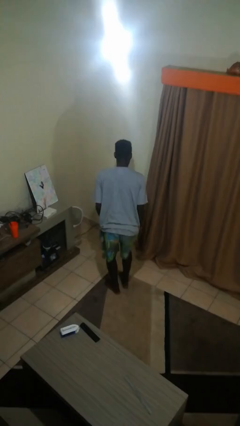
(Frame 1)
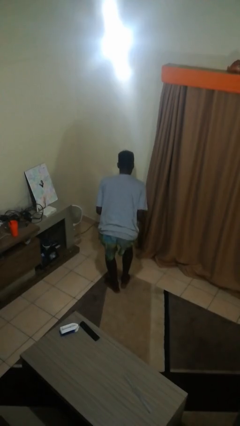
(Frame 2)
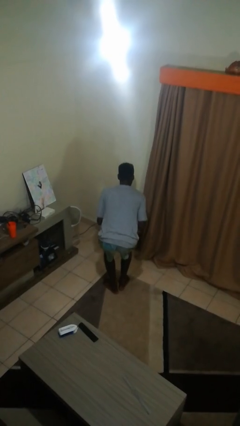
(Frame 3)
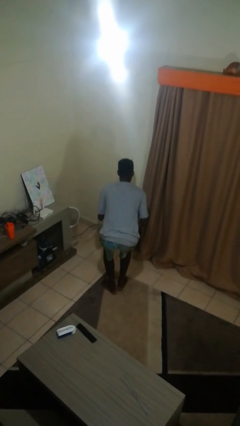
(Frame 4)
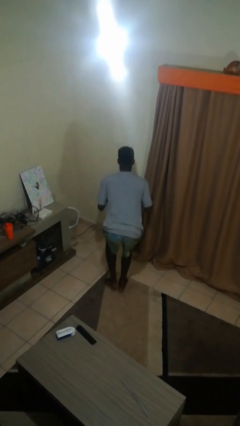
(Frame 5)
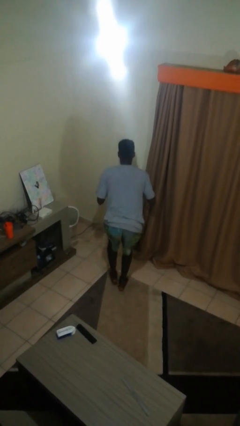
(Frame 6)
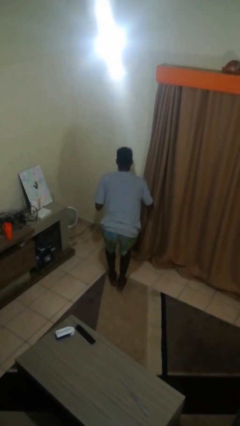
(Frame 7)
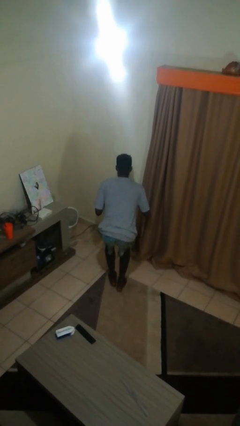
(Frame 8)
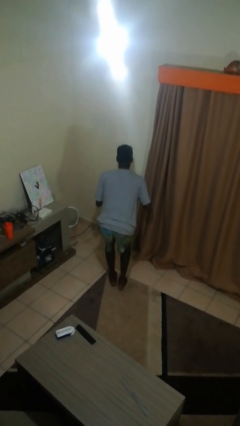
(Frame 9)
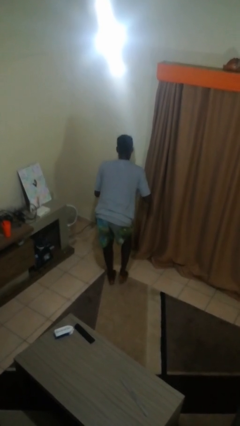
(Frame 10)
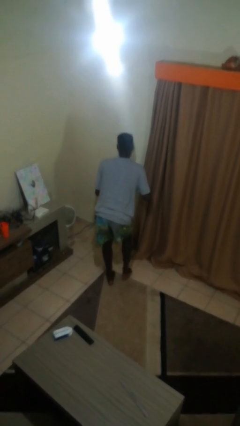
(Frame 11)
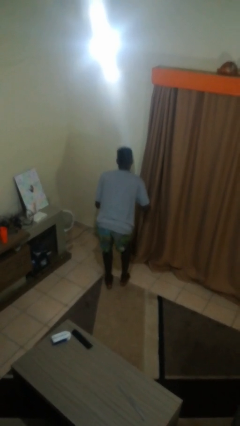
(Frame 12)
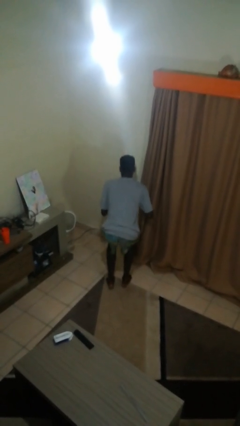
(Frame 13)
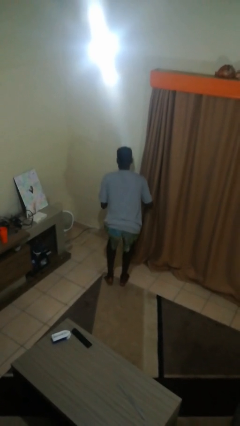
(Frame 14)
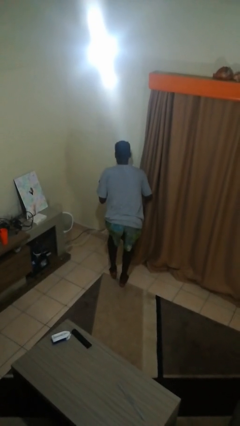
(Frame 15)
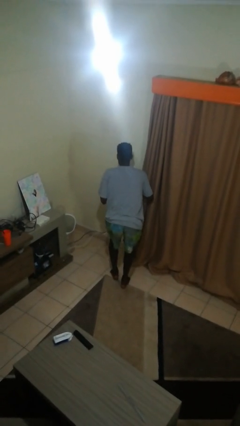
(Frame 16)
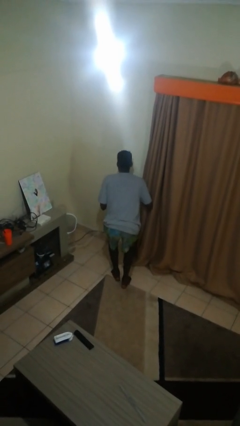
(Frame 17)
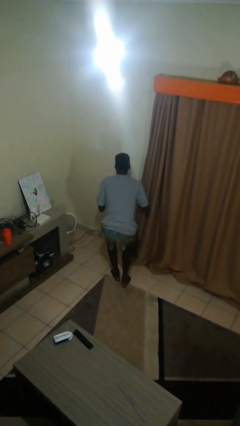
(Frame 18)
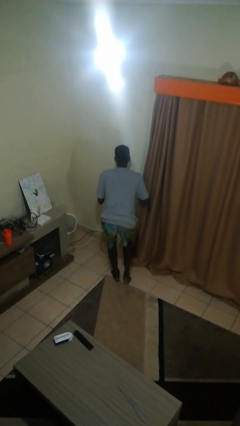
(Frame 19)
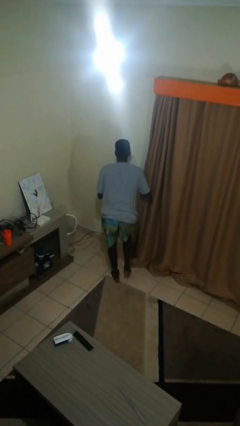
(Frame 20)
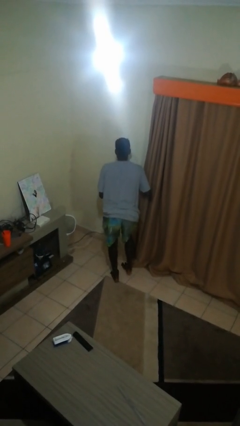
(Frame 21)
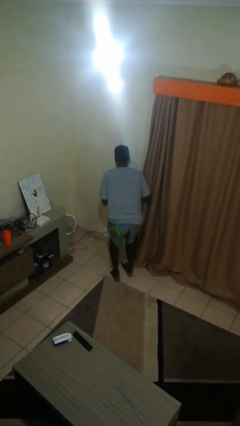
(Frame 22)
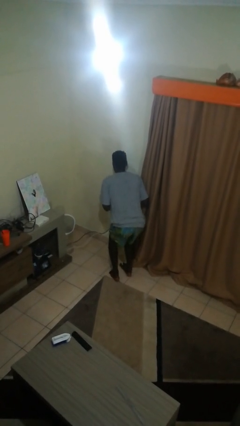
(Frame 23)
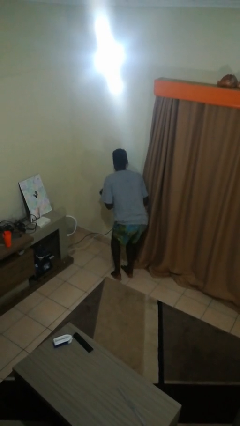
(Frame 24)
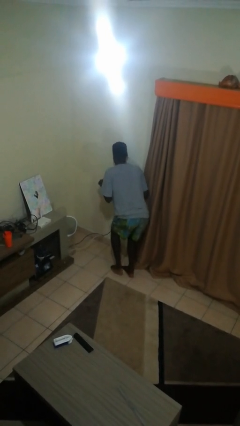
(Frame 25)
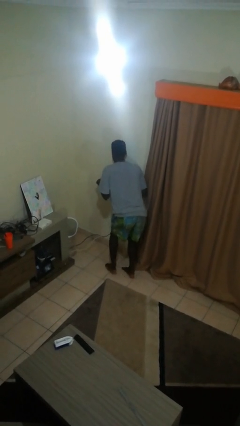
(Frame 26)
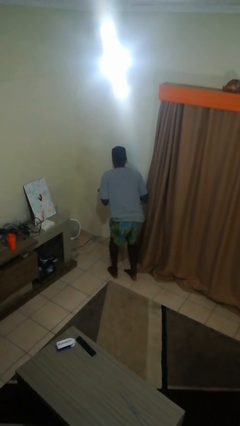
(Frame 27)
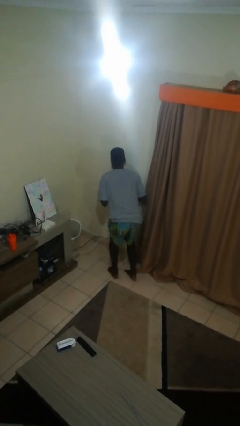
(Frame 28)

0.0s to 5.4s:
person walks tiptoe

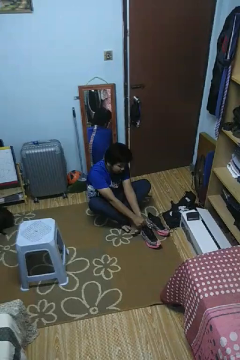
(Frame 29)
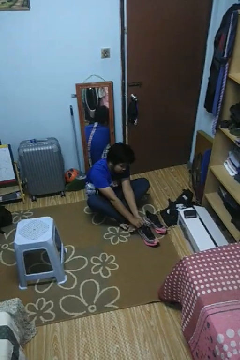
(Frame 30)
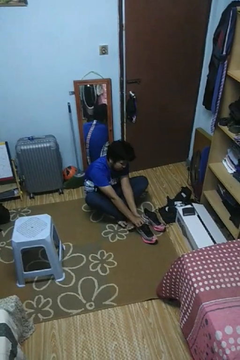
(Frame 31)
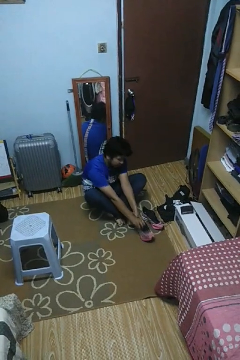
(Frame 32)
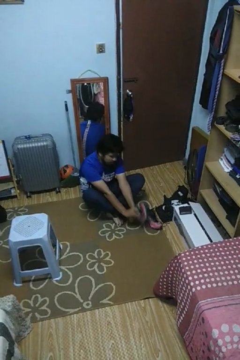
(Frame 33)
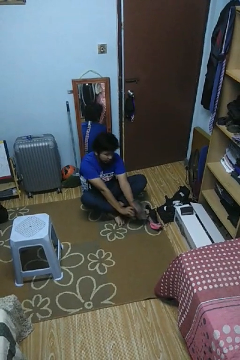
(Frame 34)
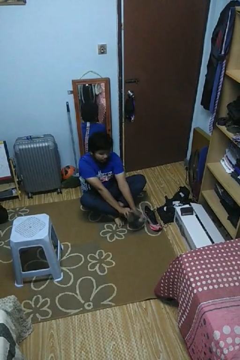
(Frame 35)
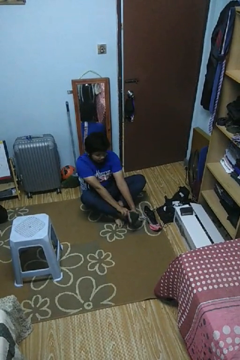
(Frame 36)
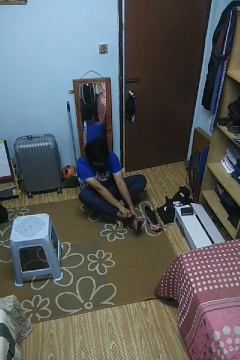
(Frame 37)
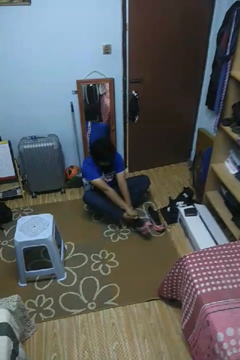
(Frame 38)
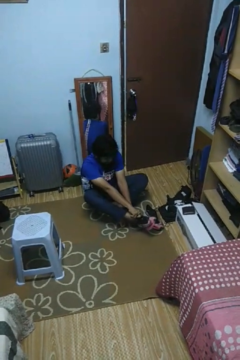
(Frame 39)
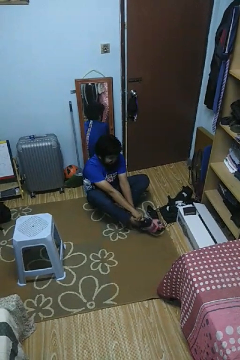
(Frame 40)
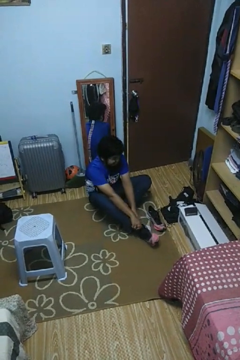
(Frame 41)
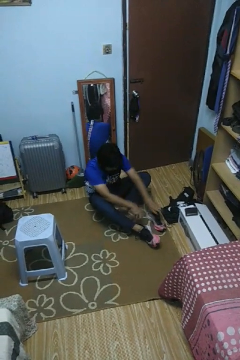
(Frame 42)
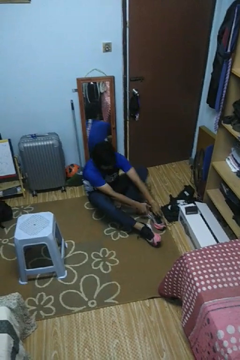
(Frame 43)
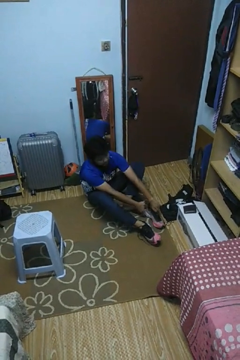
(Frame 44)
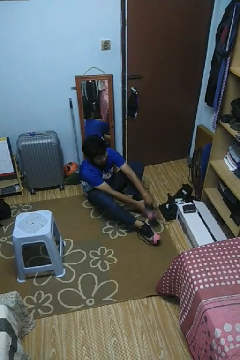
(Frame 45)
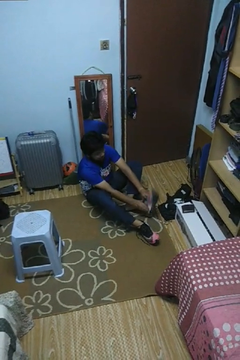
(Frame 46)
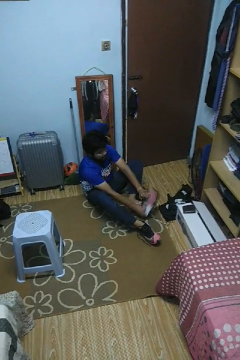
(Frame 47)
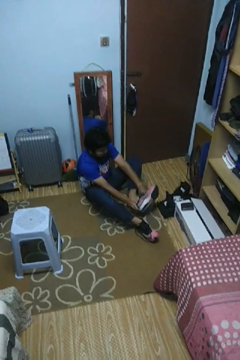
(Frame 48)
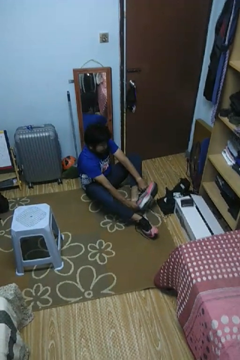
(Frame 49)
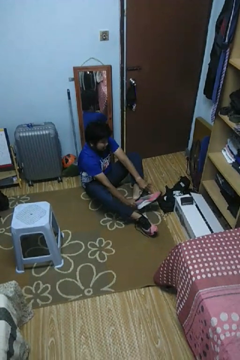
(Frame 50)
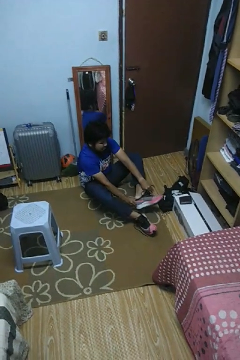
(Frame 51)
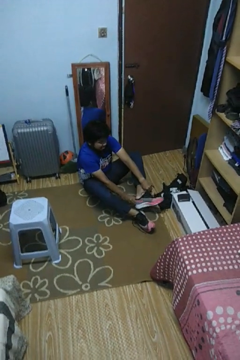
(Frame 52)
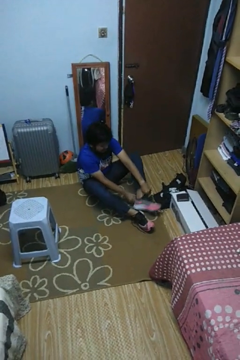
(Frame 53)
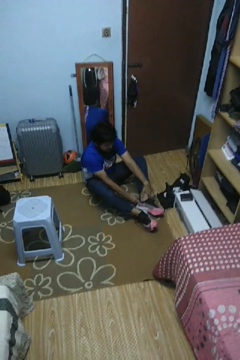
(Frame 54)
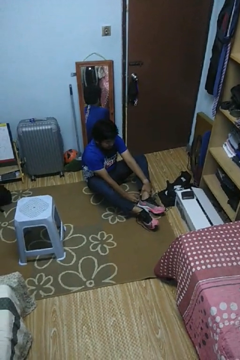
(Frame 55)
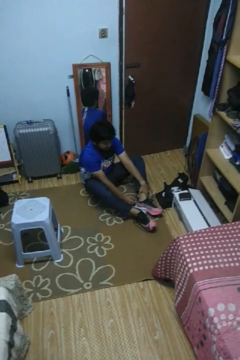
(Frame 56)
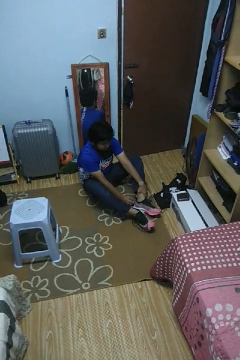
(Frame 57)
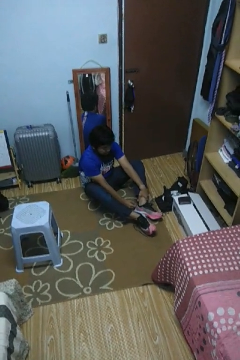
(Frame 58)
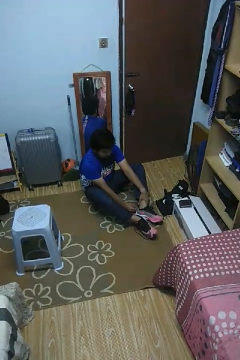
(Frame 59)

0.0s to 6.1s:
person puts on shoes

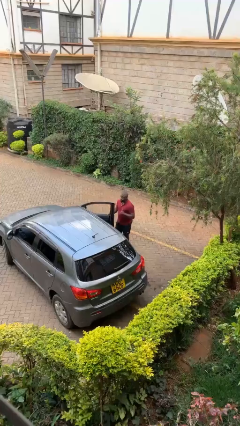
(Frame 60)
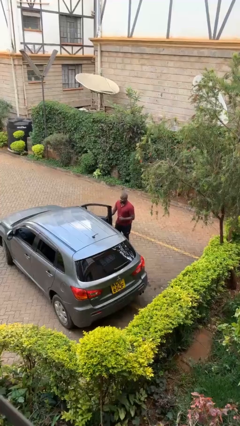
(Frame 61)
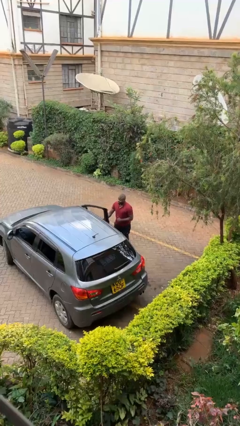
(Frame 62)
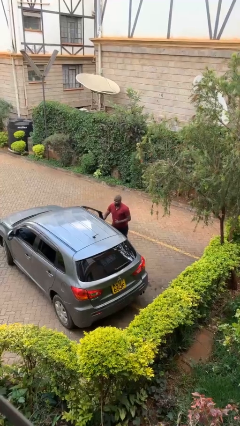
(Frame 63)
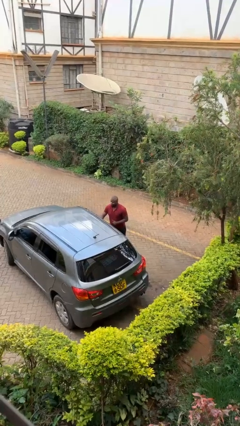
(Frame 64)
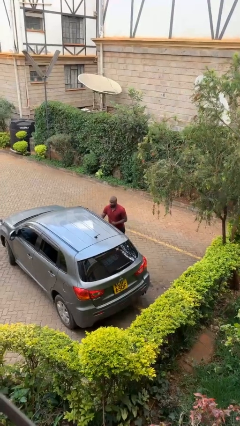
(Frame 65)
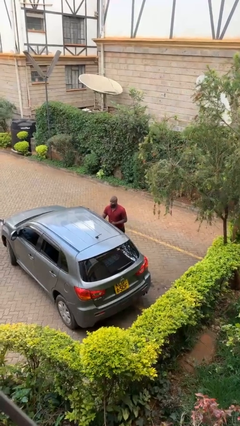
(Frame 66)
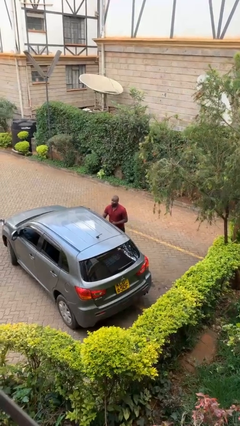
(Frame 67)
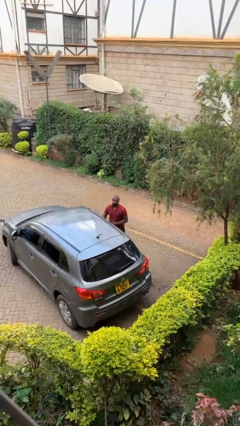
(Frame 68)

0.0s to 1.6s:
person closes car door

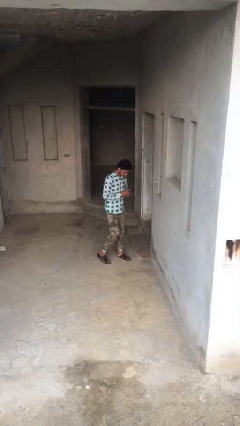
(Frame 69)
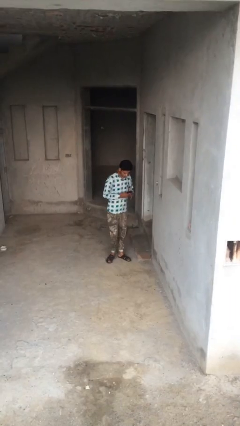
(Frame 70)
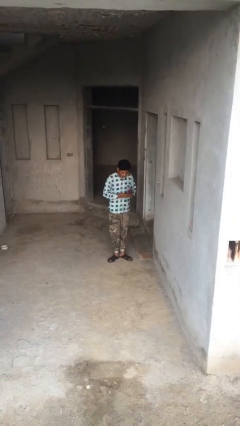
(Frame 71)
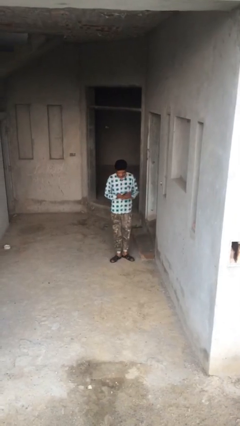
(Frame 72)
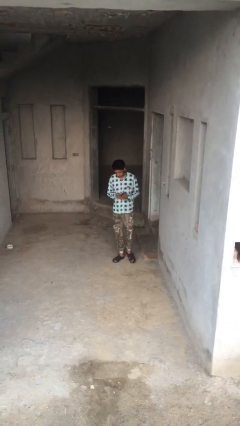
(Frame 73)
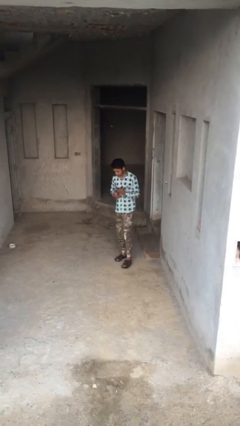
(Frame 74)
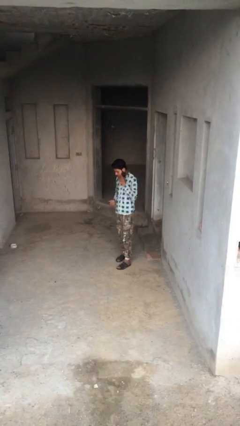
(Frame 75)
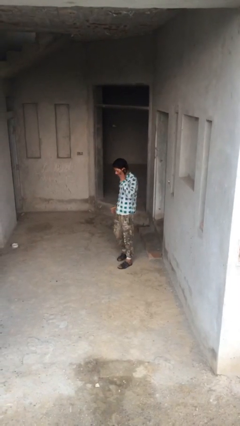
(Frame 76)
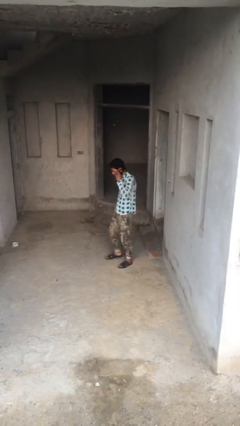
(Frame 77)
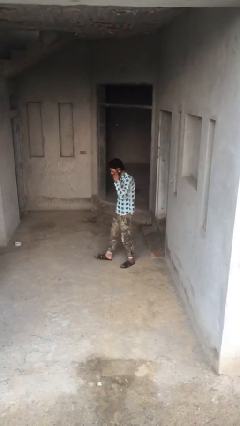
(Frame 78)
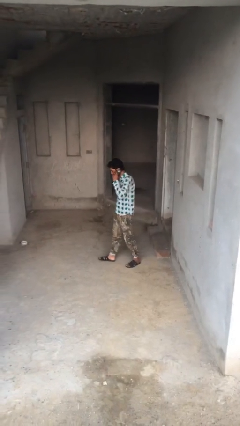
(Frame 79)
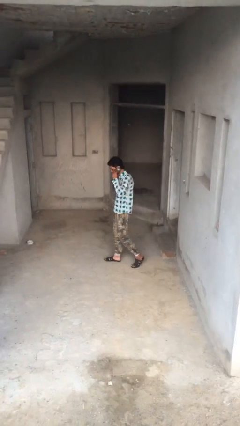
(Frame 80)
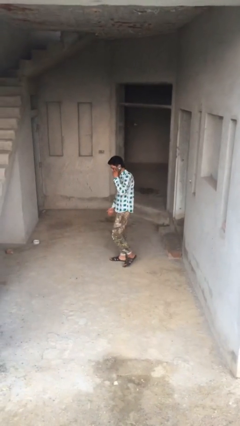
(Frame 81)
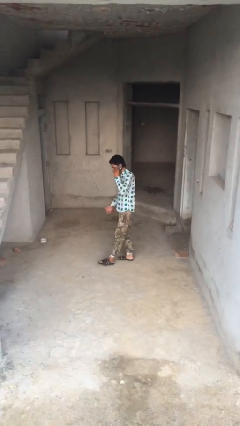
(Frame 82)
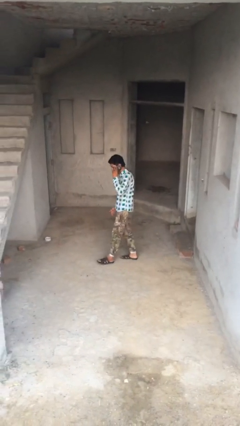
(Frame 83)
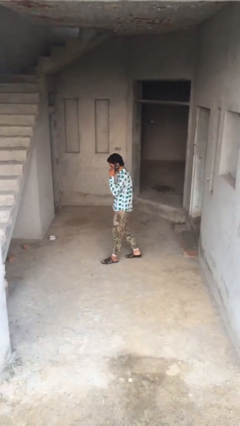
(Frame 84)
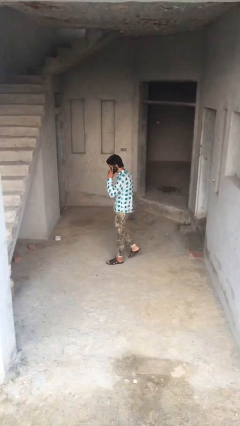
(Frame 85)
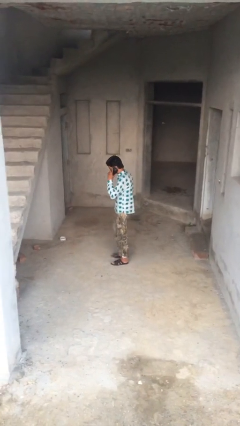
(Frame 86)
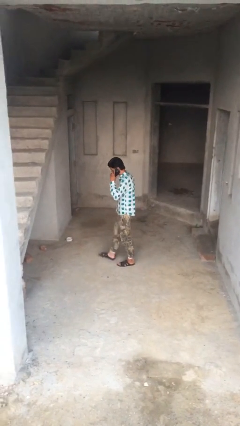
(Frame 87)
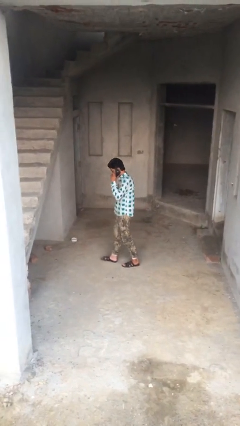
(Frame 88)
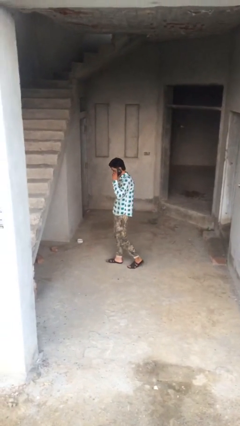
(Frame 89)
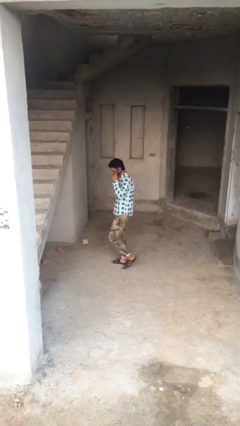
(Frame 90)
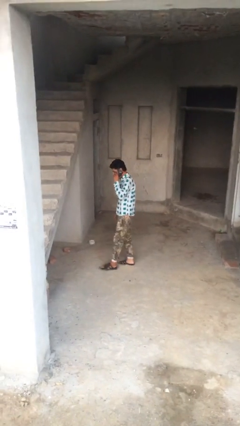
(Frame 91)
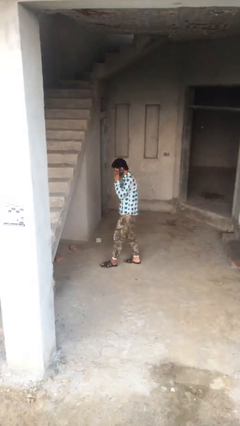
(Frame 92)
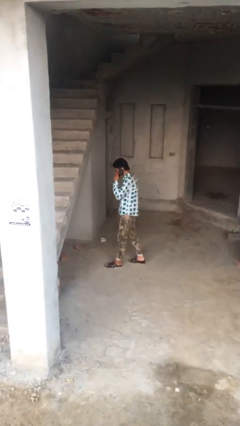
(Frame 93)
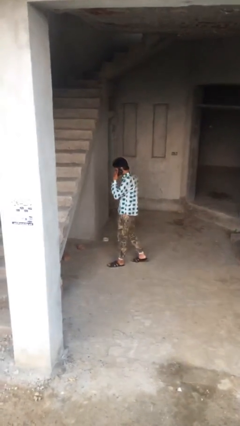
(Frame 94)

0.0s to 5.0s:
person talks on phone

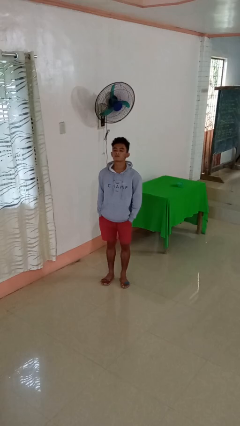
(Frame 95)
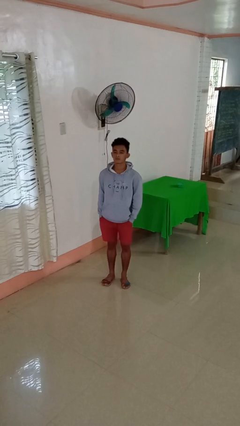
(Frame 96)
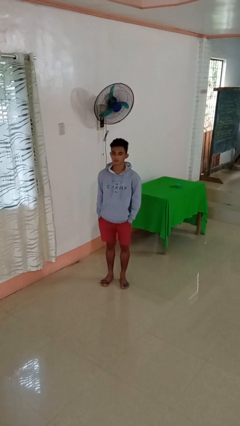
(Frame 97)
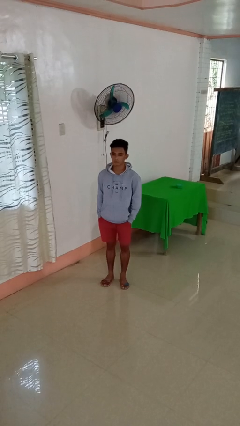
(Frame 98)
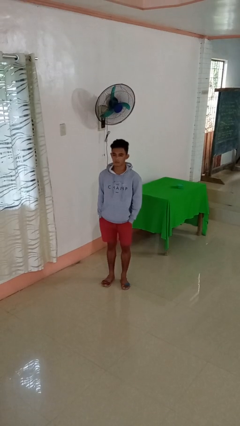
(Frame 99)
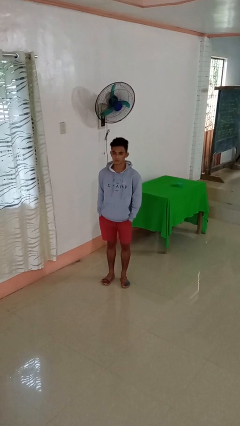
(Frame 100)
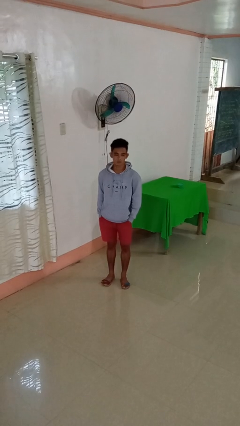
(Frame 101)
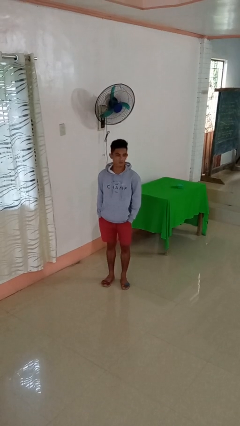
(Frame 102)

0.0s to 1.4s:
person nods head
